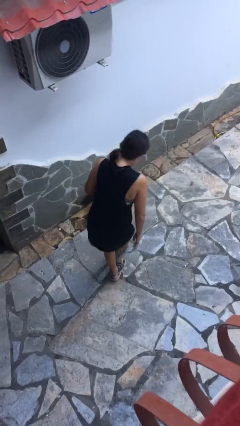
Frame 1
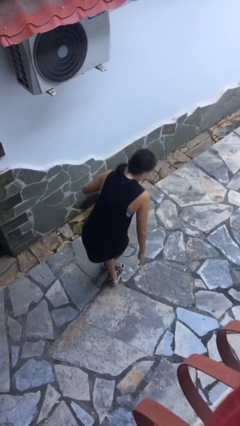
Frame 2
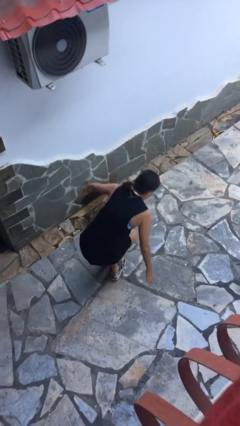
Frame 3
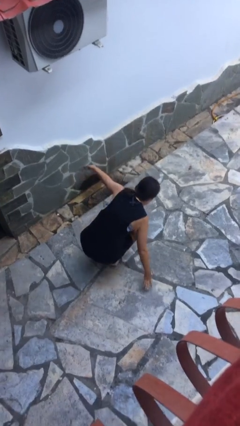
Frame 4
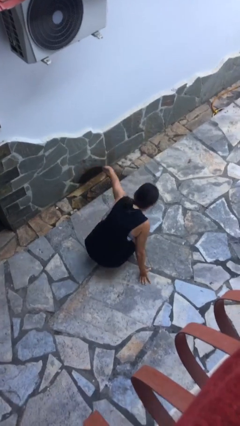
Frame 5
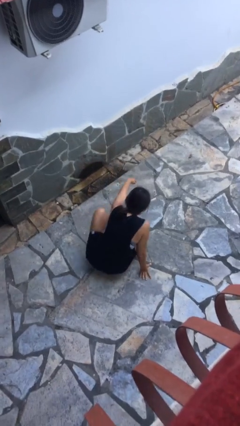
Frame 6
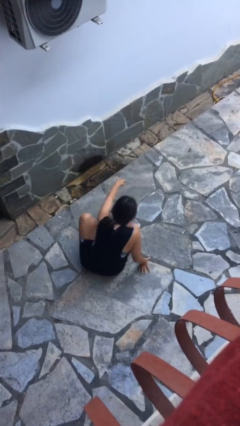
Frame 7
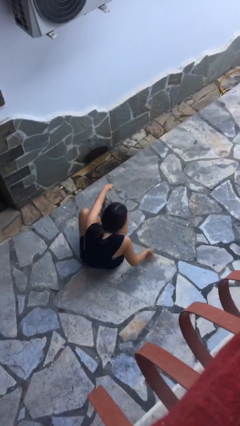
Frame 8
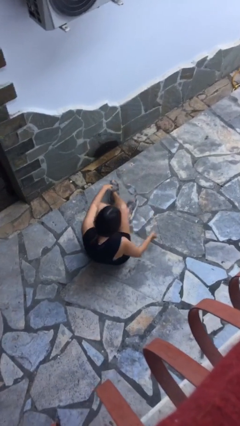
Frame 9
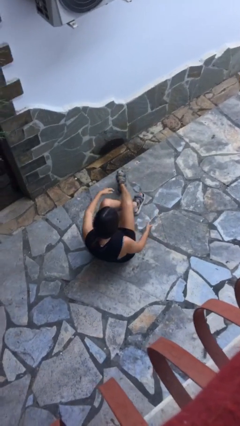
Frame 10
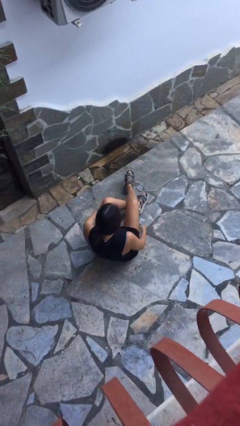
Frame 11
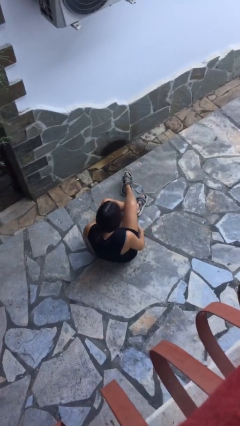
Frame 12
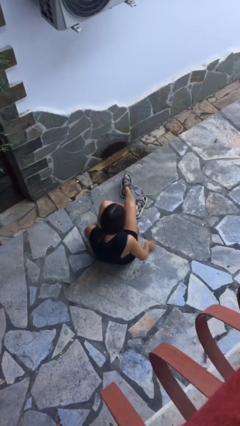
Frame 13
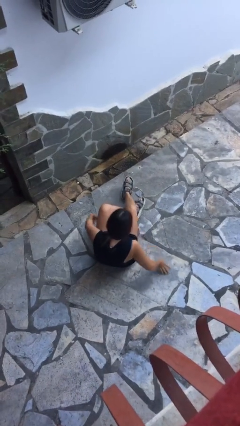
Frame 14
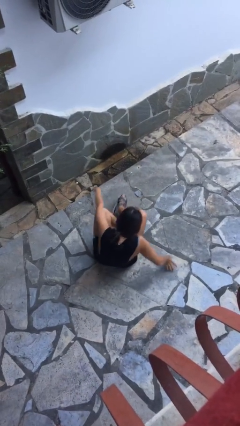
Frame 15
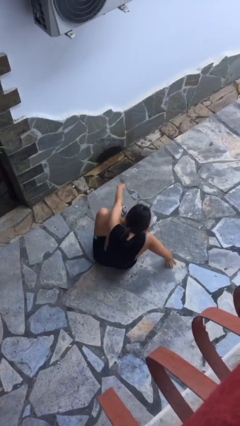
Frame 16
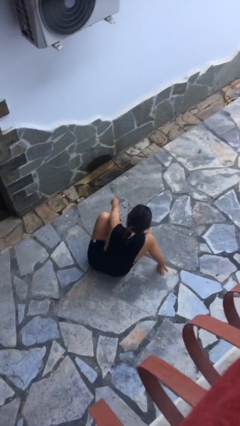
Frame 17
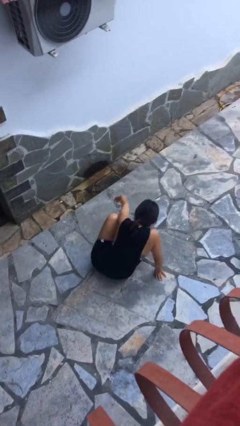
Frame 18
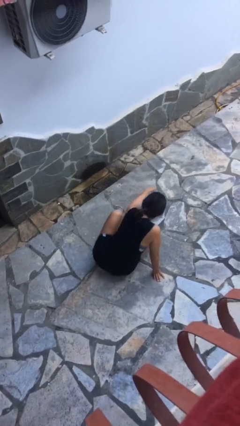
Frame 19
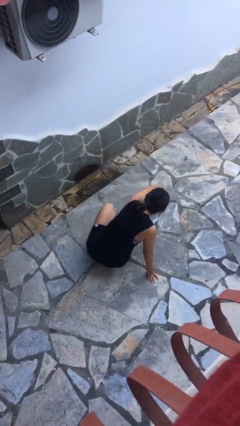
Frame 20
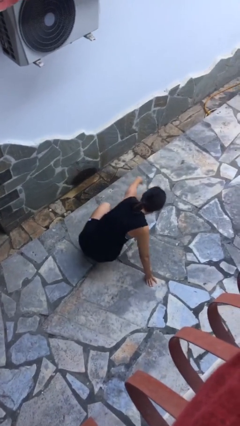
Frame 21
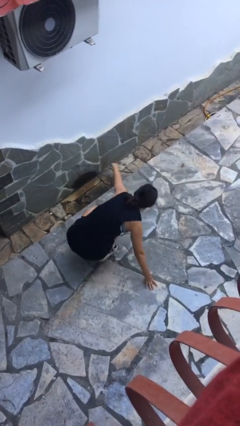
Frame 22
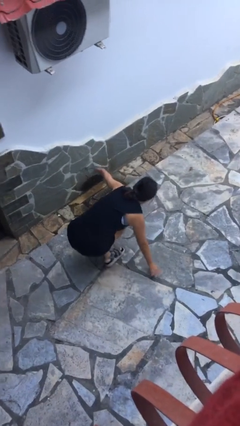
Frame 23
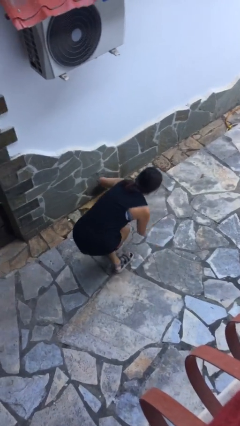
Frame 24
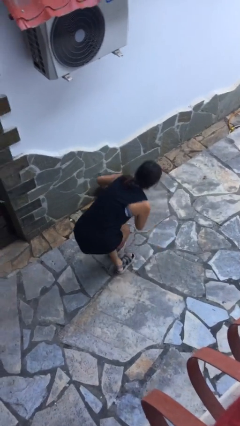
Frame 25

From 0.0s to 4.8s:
person sits crisscross

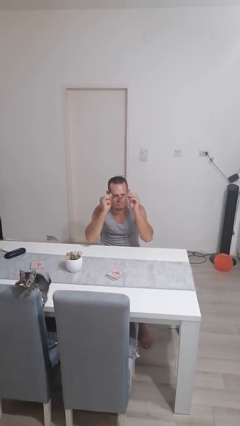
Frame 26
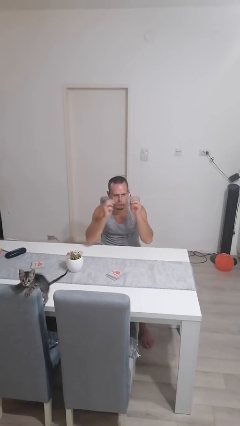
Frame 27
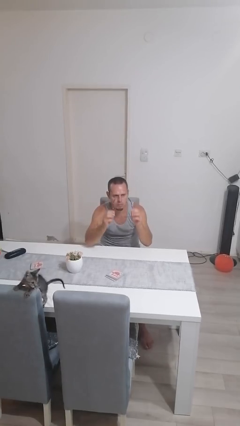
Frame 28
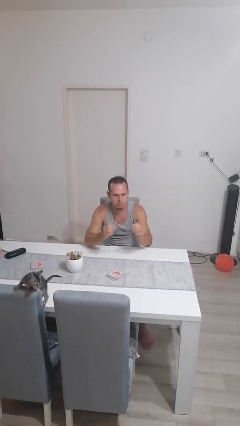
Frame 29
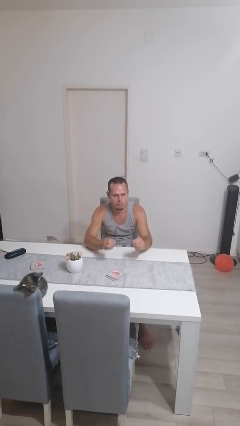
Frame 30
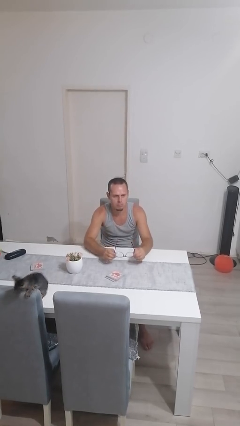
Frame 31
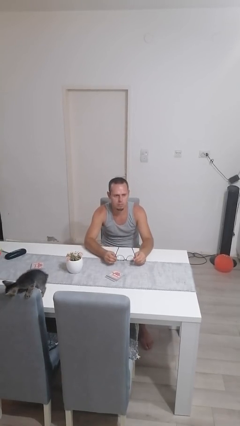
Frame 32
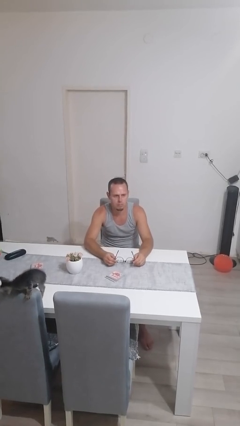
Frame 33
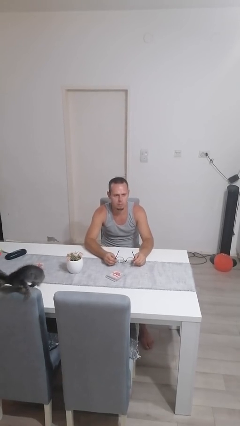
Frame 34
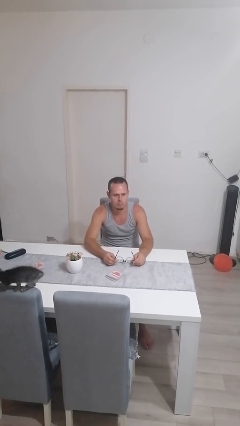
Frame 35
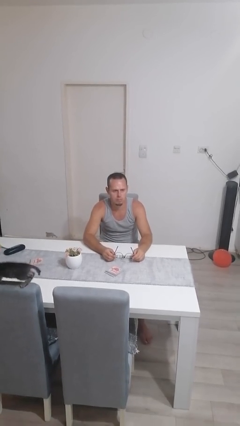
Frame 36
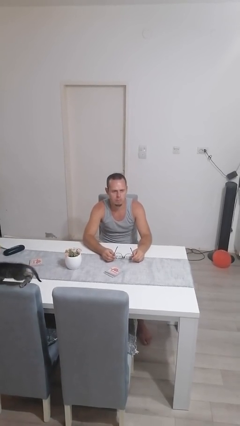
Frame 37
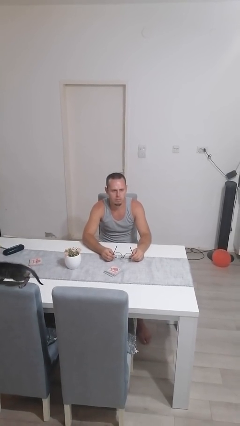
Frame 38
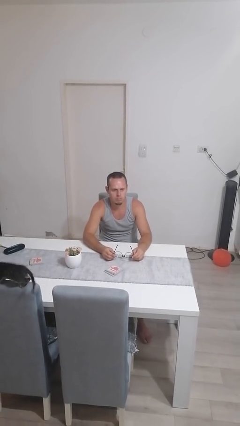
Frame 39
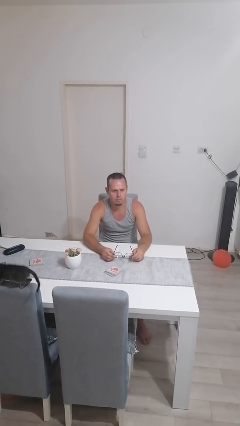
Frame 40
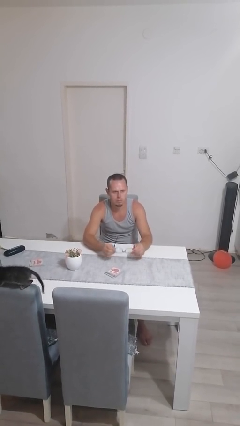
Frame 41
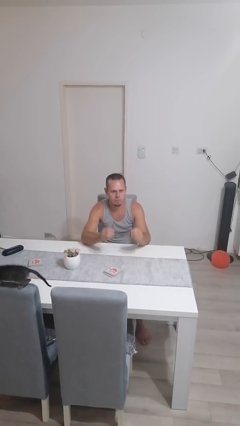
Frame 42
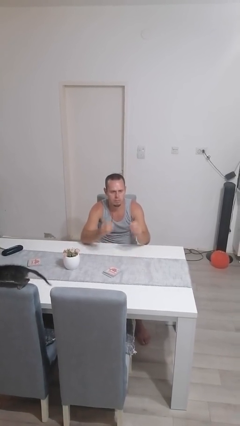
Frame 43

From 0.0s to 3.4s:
person takes off glasses

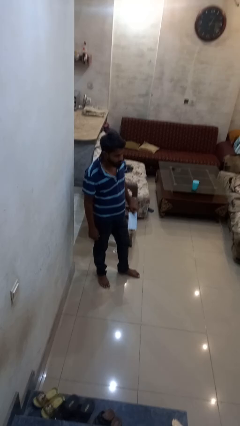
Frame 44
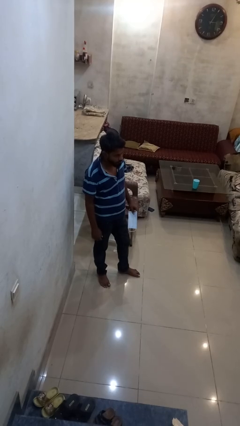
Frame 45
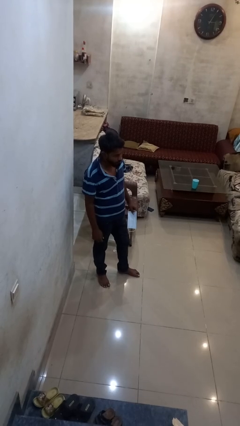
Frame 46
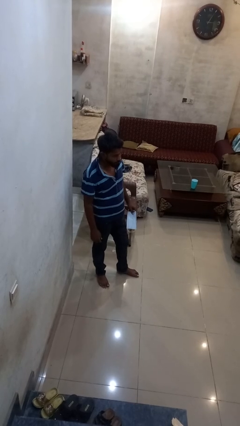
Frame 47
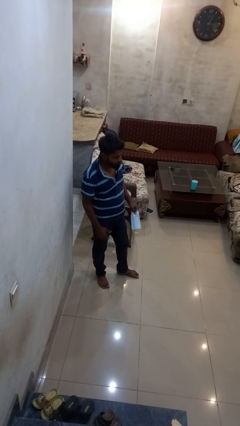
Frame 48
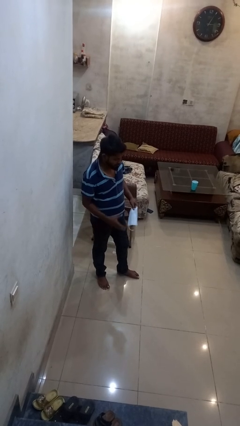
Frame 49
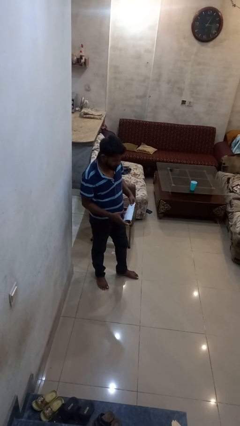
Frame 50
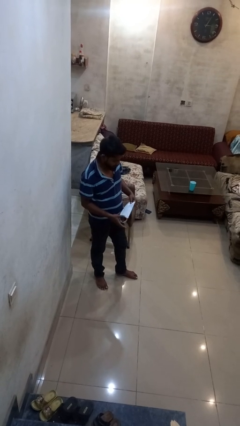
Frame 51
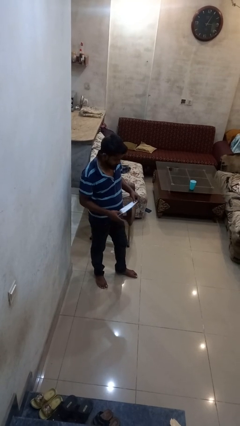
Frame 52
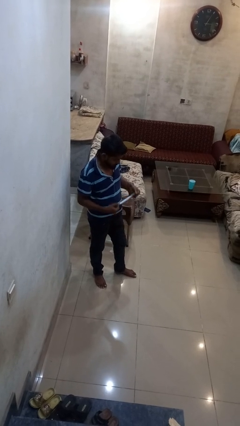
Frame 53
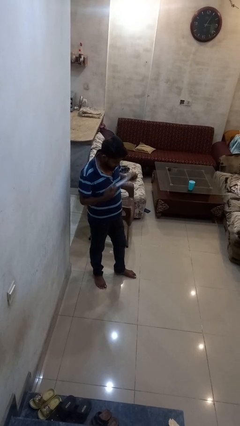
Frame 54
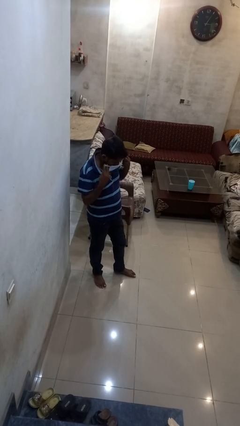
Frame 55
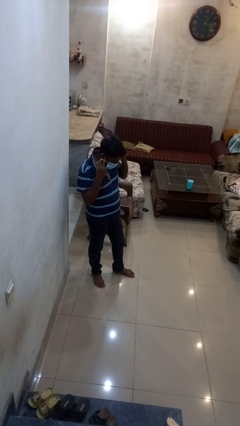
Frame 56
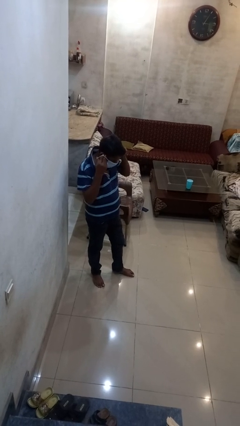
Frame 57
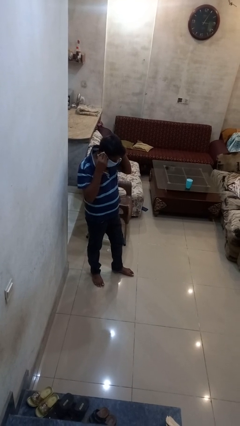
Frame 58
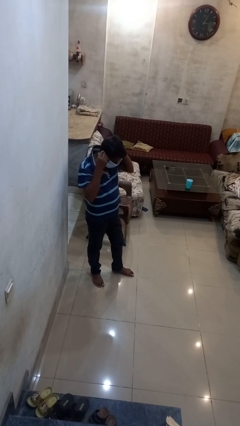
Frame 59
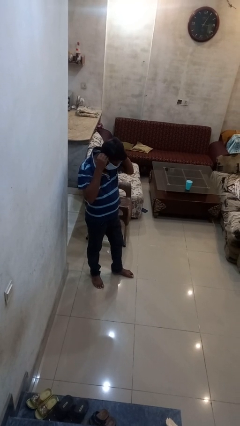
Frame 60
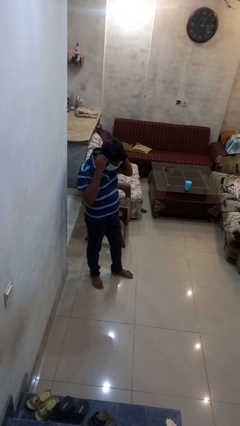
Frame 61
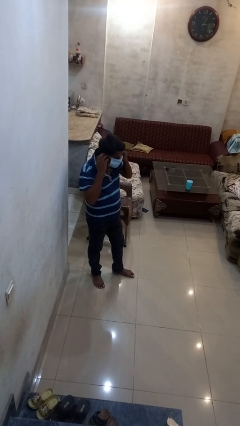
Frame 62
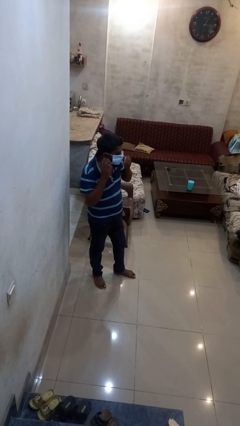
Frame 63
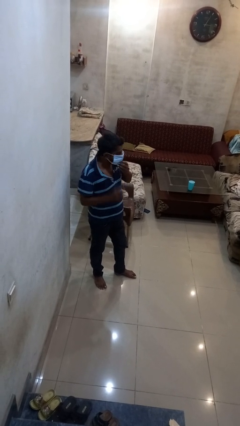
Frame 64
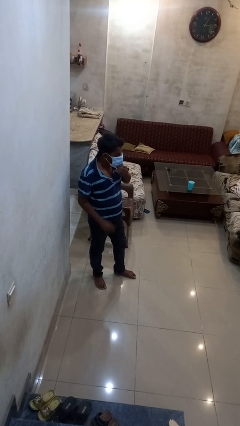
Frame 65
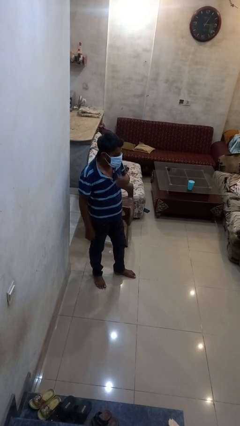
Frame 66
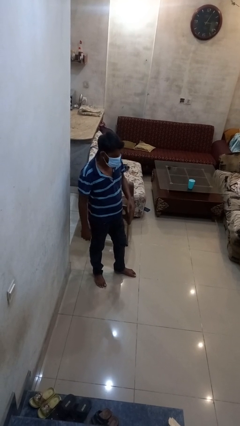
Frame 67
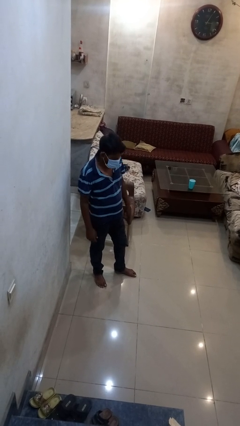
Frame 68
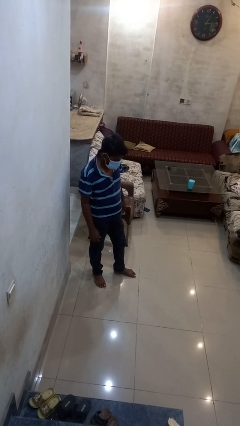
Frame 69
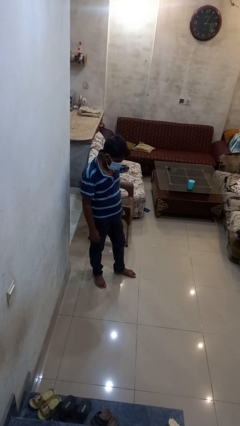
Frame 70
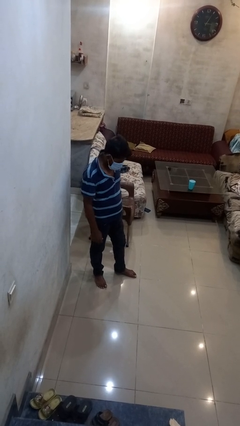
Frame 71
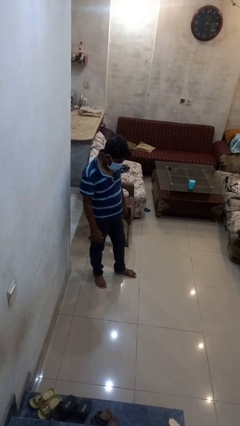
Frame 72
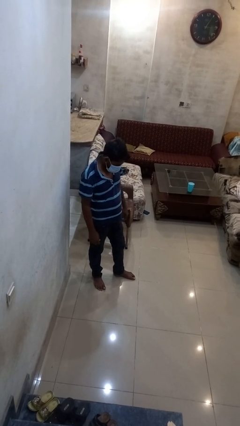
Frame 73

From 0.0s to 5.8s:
person puts on facemask

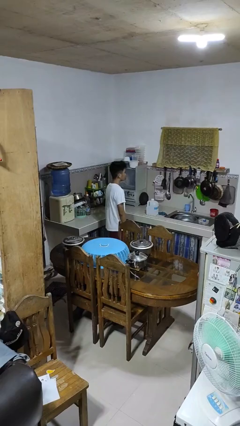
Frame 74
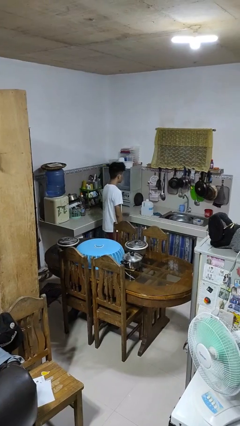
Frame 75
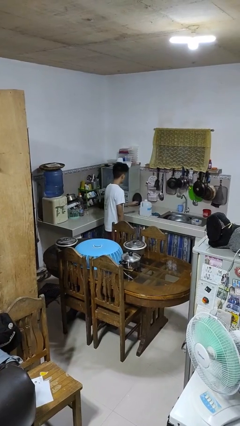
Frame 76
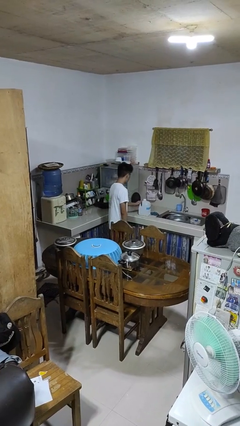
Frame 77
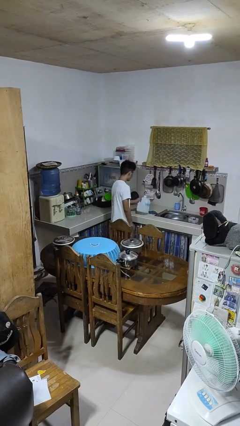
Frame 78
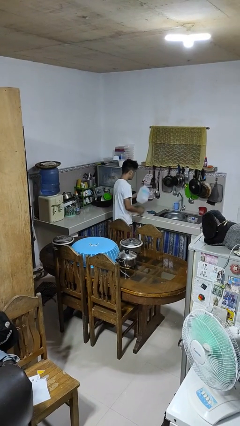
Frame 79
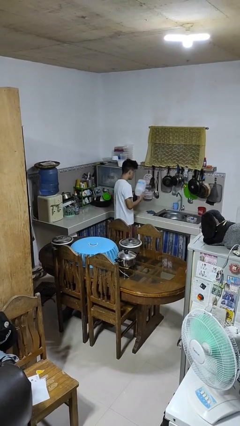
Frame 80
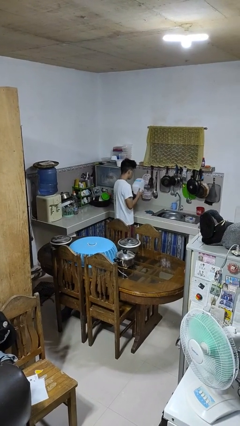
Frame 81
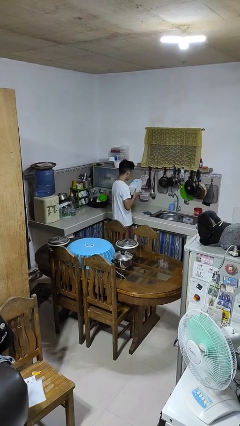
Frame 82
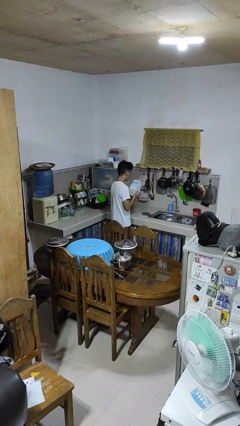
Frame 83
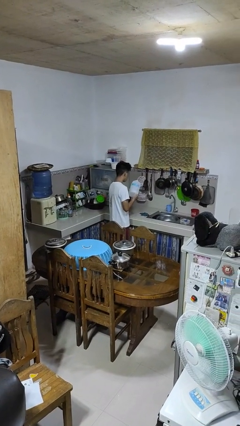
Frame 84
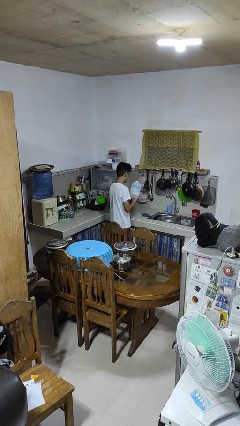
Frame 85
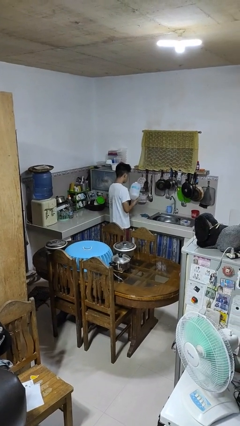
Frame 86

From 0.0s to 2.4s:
person picks up object from countertop

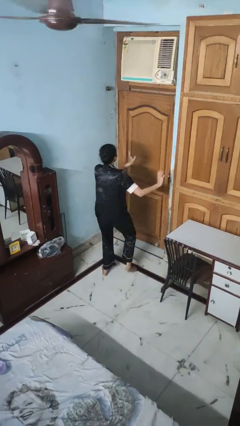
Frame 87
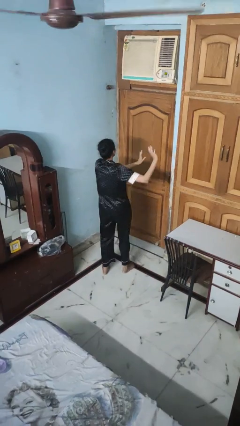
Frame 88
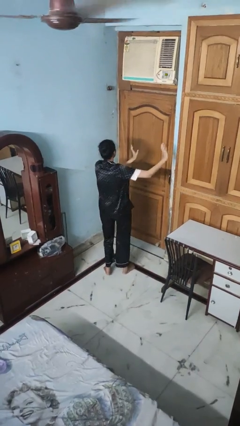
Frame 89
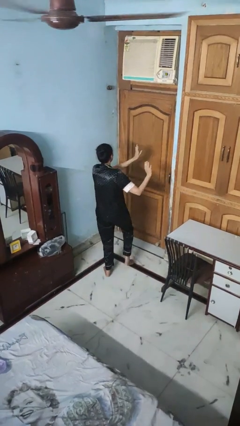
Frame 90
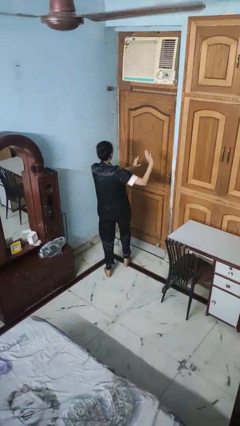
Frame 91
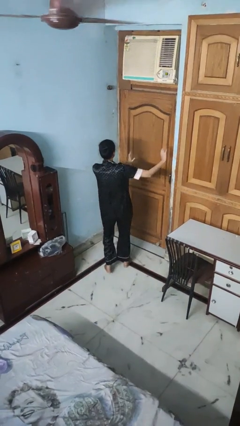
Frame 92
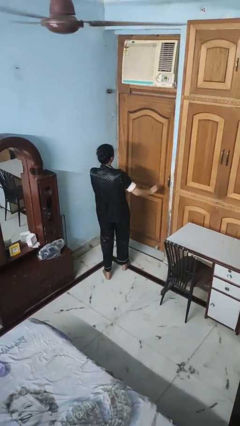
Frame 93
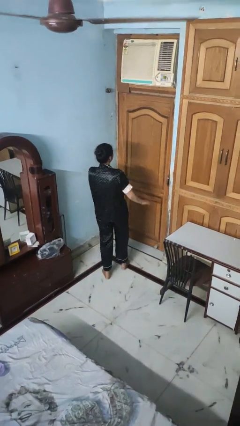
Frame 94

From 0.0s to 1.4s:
person dances in place
